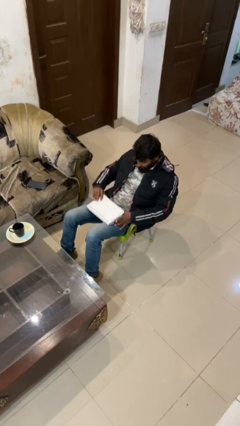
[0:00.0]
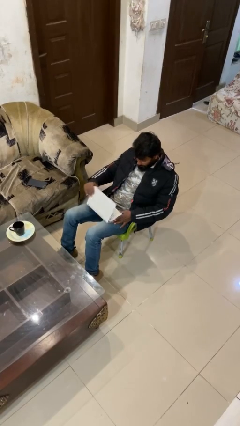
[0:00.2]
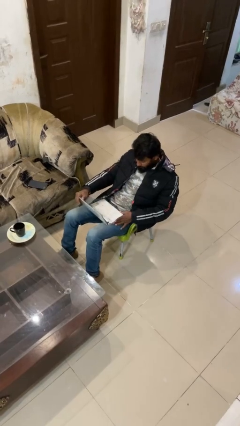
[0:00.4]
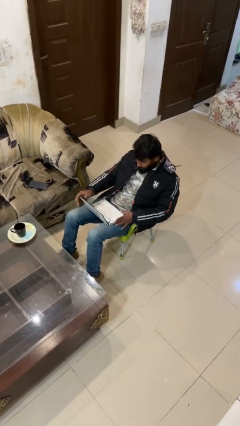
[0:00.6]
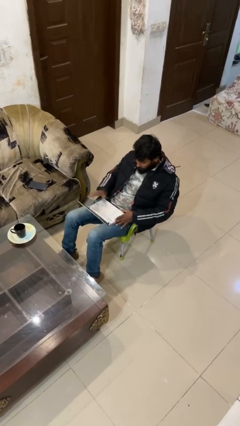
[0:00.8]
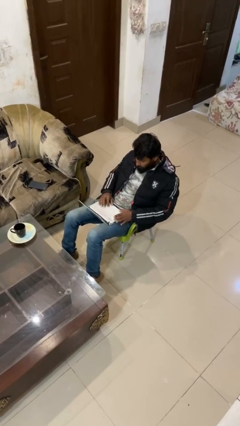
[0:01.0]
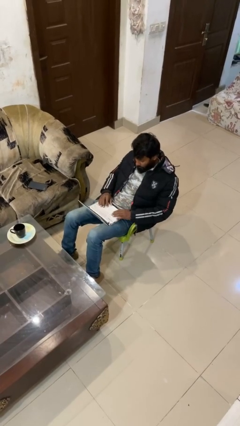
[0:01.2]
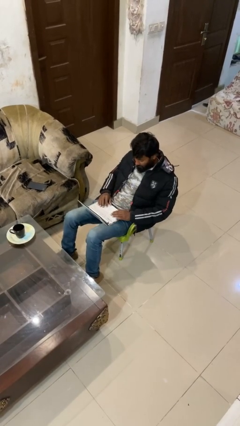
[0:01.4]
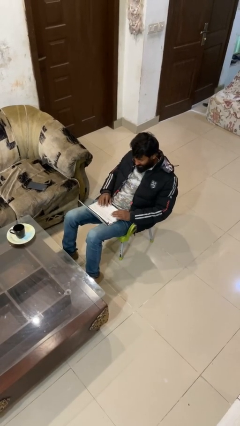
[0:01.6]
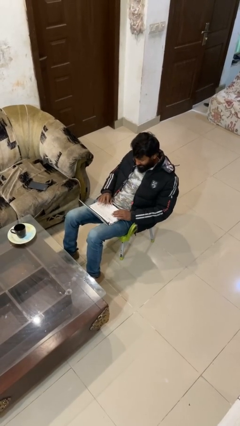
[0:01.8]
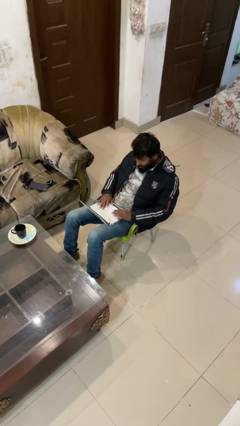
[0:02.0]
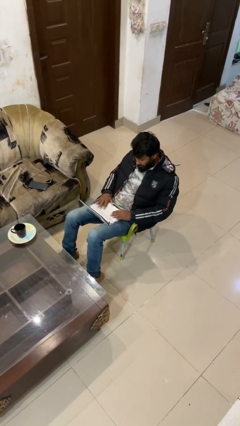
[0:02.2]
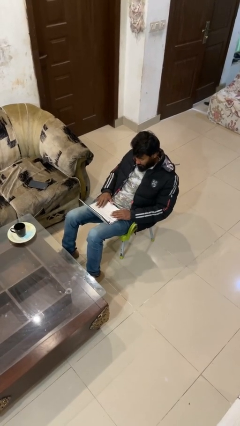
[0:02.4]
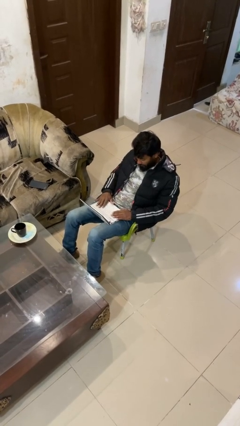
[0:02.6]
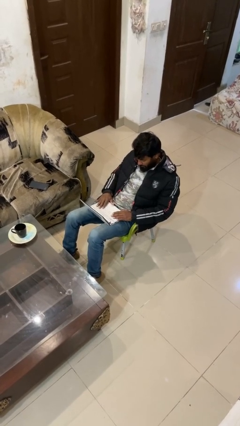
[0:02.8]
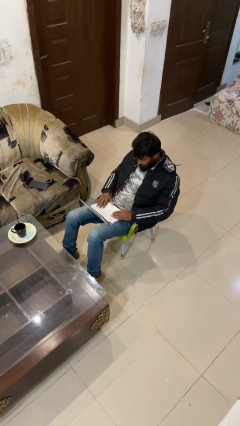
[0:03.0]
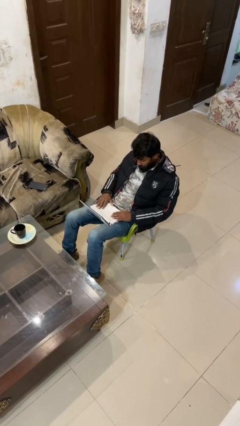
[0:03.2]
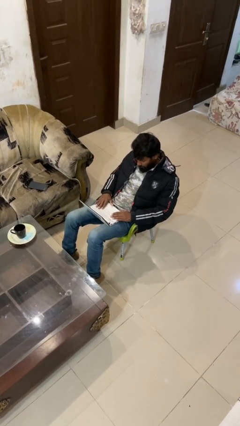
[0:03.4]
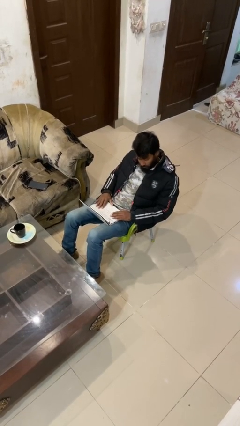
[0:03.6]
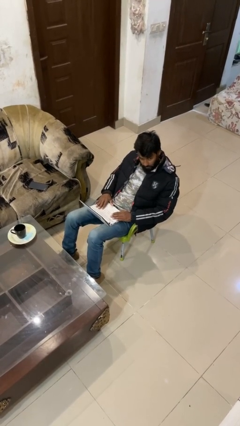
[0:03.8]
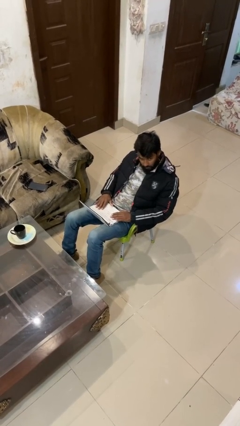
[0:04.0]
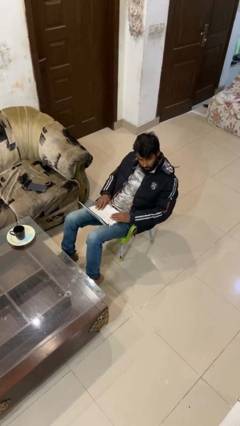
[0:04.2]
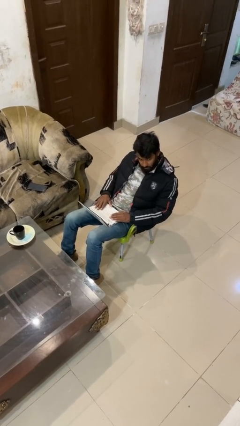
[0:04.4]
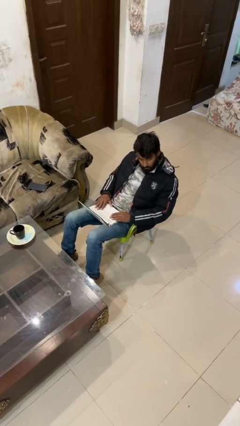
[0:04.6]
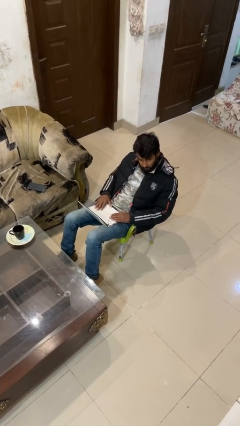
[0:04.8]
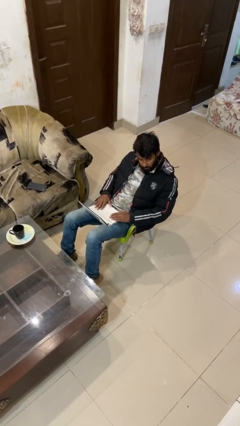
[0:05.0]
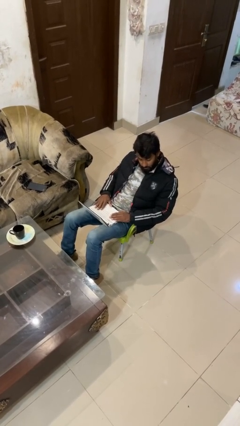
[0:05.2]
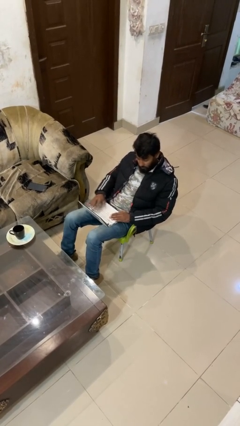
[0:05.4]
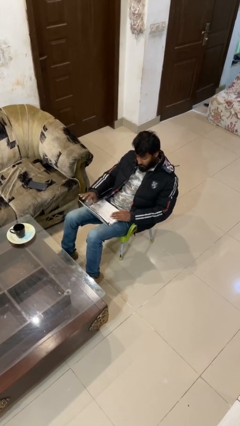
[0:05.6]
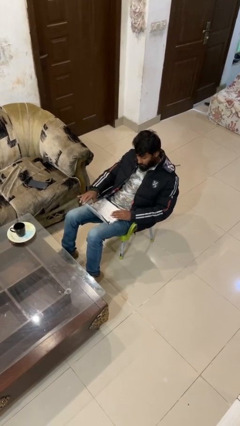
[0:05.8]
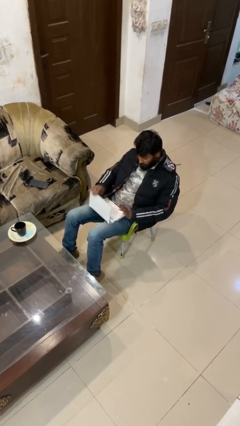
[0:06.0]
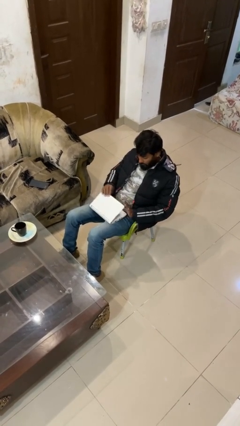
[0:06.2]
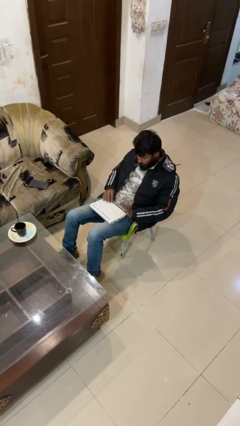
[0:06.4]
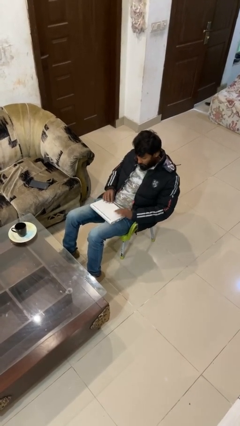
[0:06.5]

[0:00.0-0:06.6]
person interacts with laptop

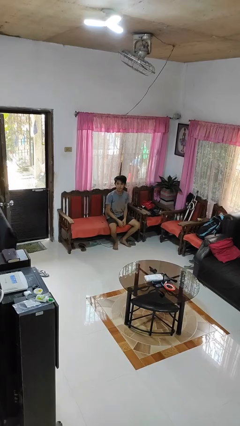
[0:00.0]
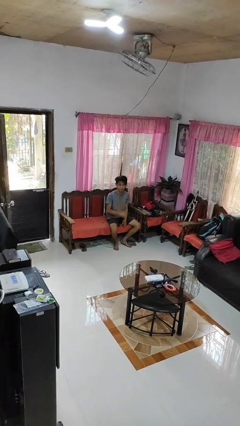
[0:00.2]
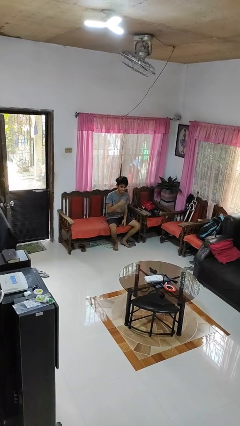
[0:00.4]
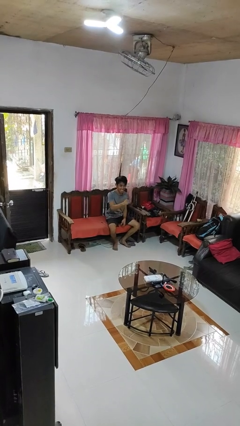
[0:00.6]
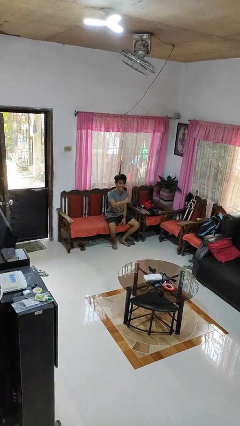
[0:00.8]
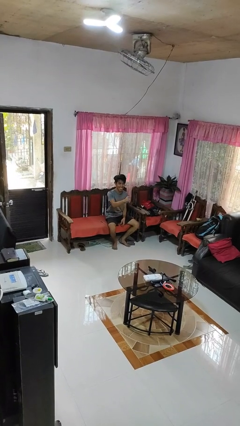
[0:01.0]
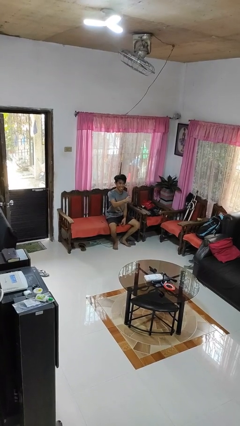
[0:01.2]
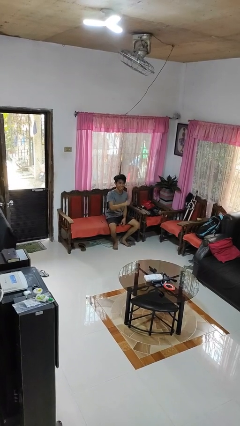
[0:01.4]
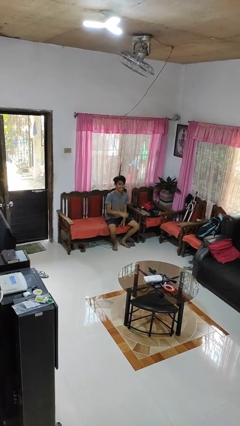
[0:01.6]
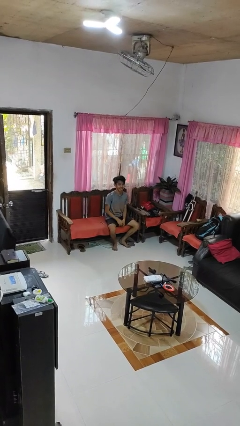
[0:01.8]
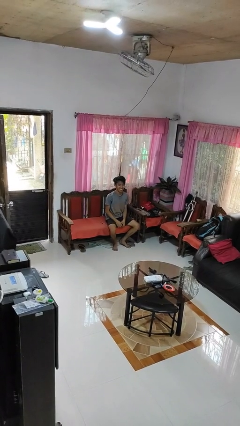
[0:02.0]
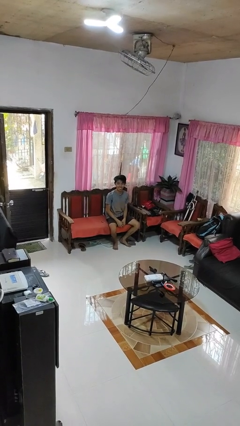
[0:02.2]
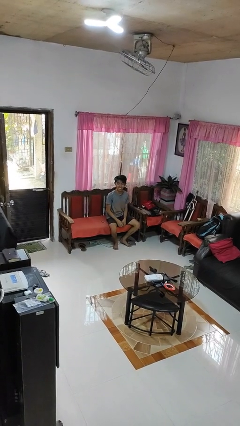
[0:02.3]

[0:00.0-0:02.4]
person gestures thumbs up

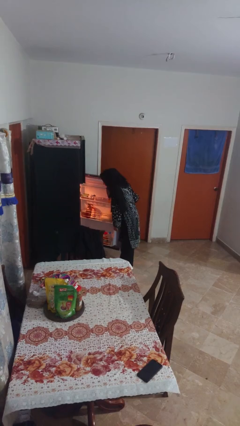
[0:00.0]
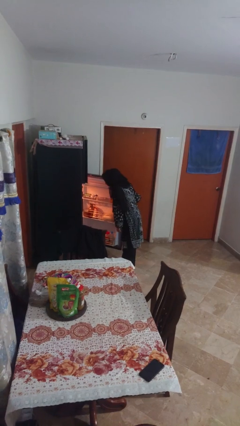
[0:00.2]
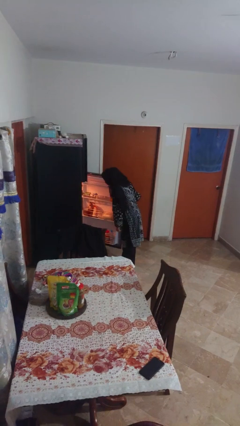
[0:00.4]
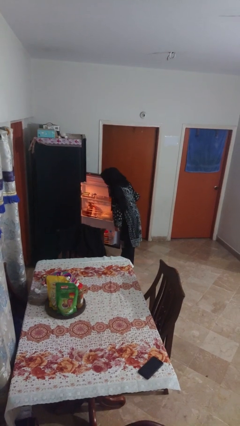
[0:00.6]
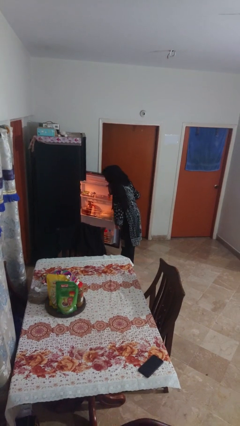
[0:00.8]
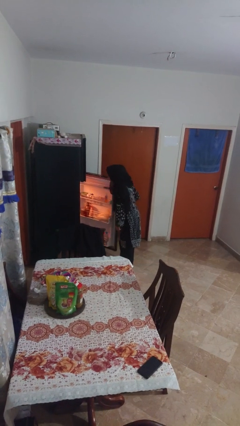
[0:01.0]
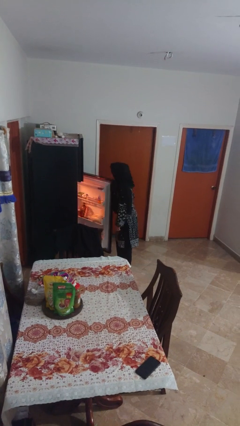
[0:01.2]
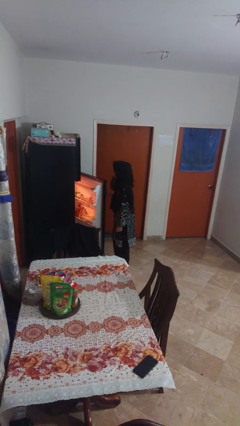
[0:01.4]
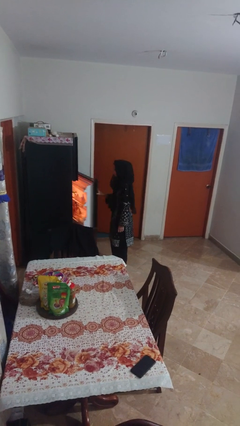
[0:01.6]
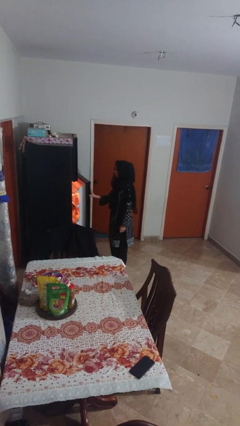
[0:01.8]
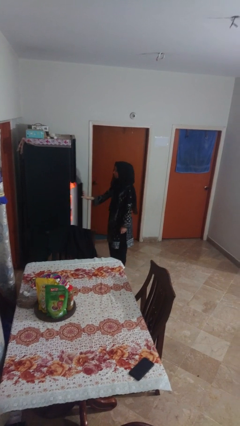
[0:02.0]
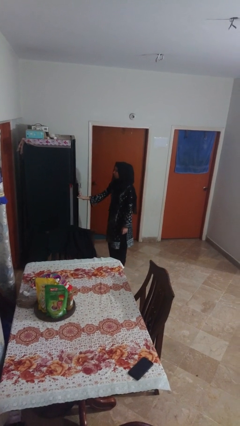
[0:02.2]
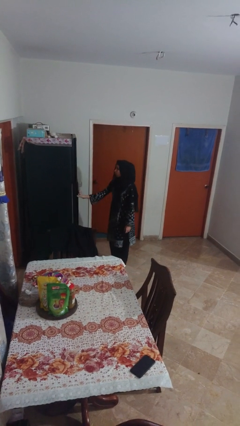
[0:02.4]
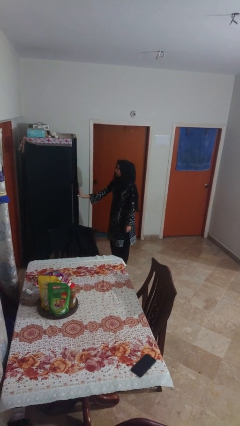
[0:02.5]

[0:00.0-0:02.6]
person closes refrigerator

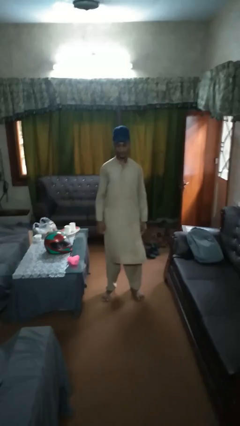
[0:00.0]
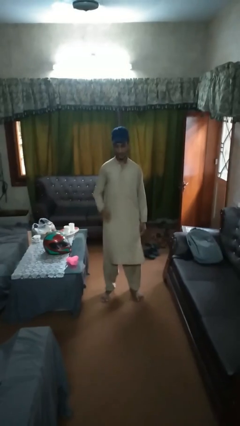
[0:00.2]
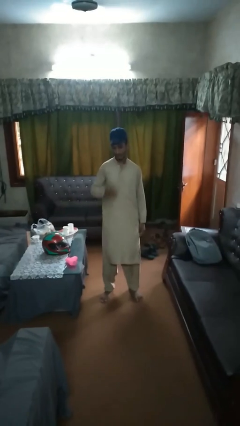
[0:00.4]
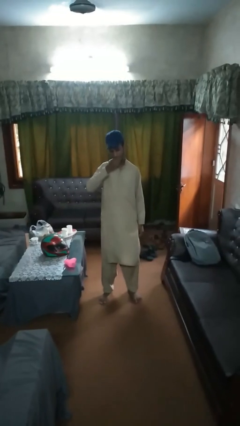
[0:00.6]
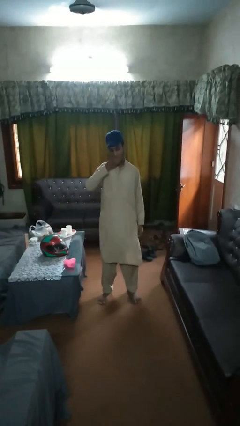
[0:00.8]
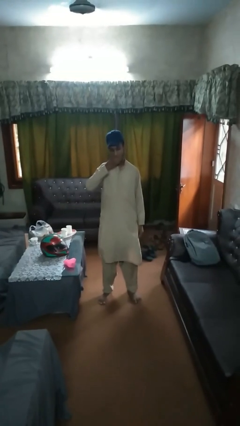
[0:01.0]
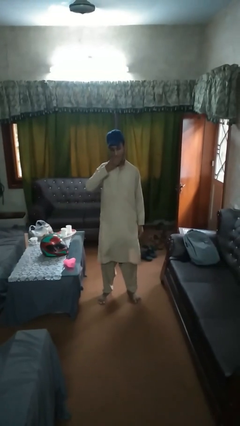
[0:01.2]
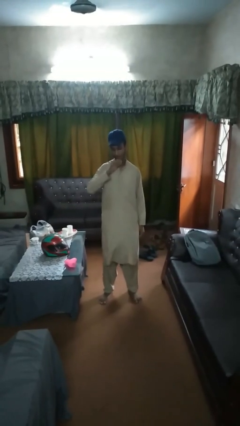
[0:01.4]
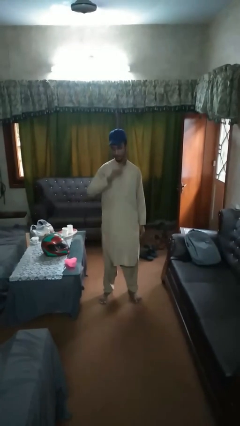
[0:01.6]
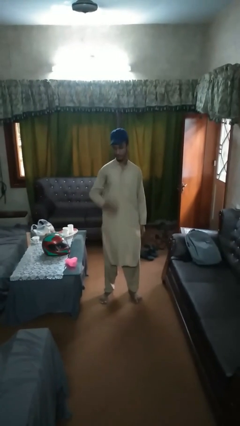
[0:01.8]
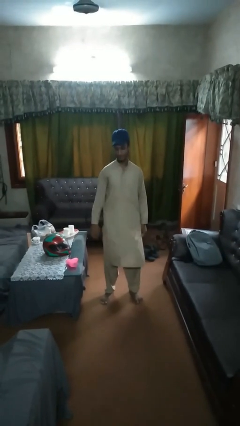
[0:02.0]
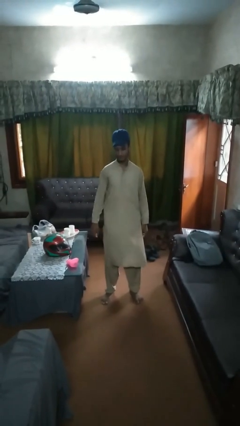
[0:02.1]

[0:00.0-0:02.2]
person eats banana

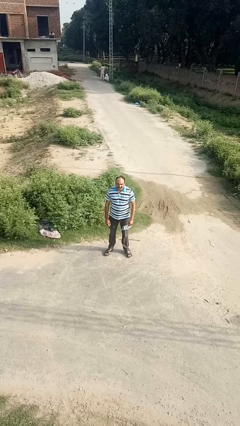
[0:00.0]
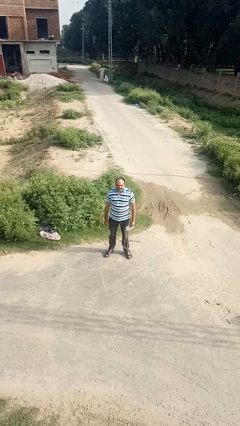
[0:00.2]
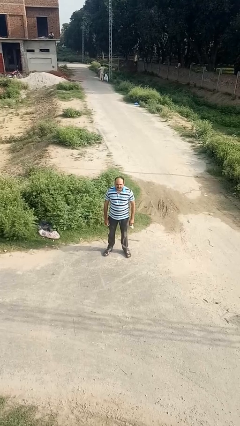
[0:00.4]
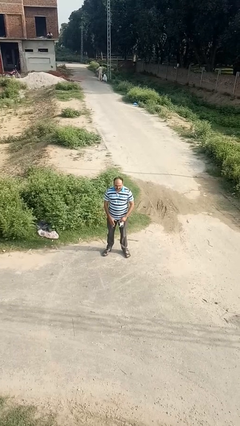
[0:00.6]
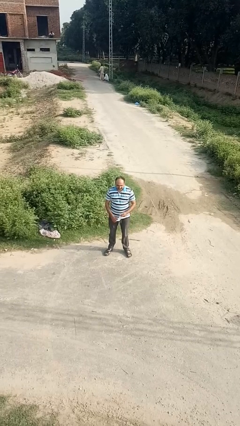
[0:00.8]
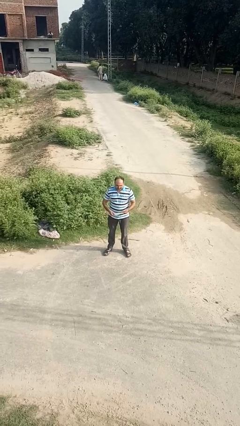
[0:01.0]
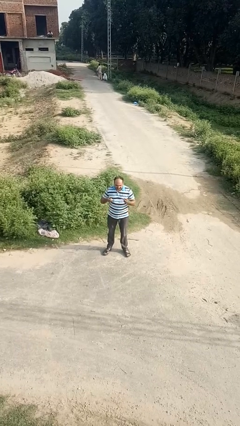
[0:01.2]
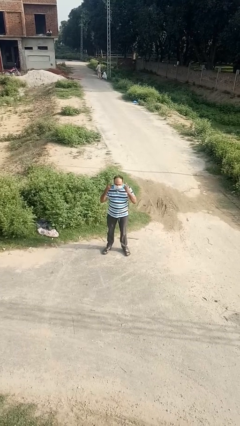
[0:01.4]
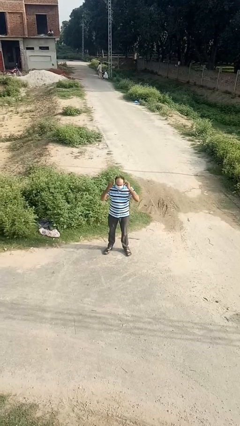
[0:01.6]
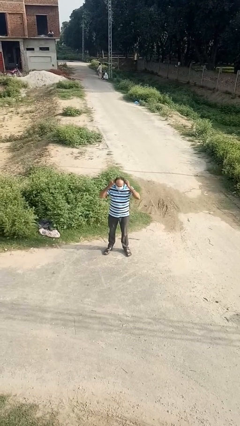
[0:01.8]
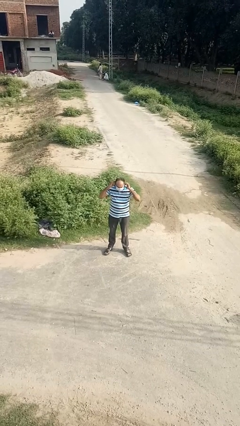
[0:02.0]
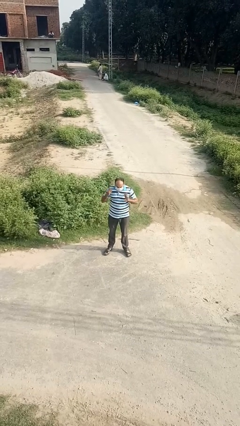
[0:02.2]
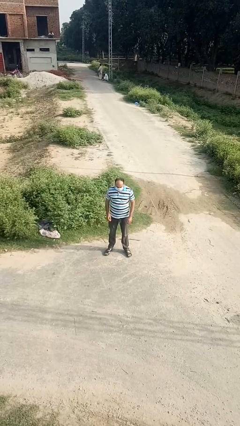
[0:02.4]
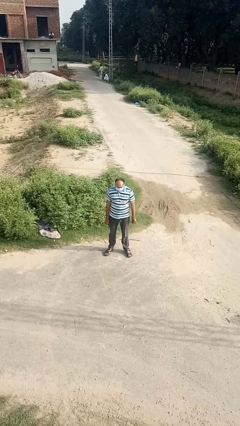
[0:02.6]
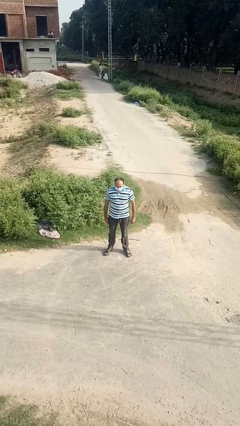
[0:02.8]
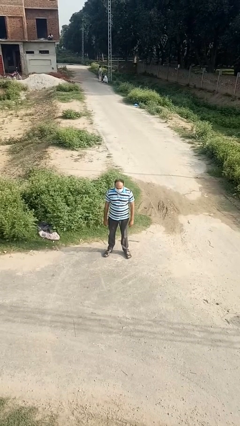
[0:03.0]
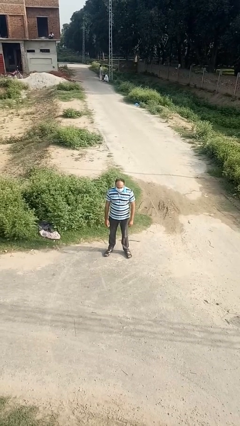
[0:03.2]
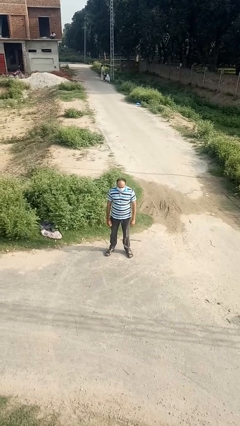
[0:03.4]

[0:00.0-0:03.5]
person puts on facemask

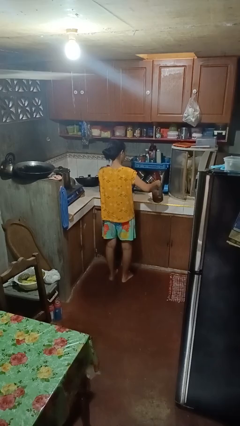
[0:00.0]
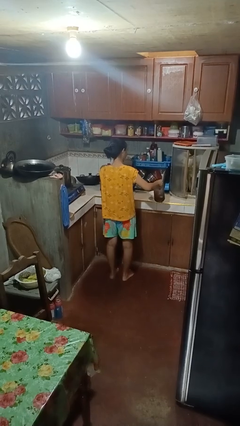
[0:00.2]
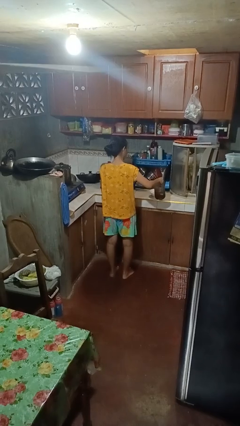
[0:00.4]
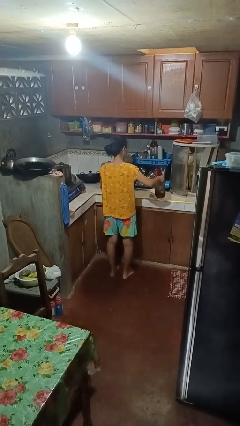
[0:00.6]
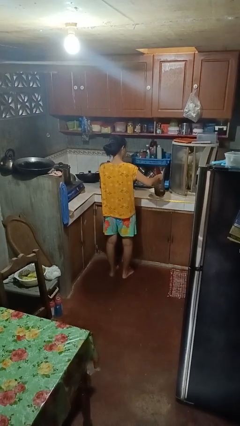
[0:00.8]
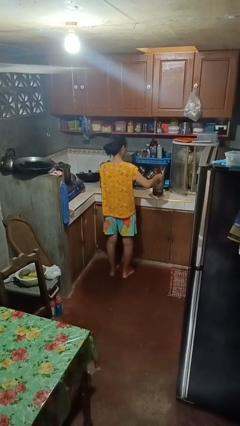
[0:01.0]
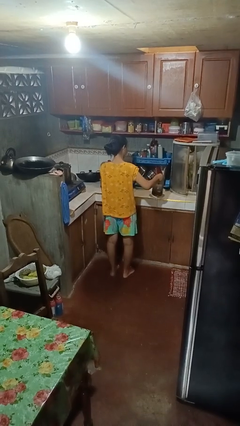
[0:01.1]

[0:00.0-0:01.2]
person pours into bowl
